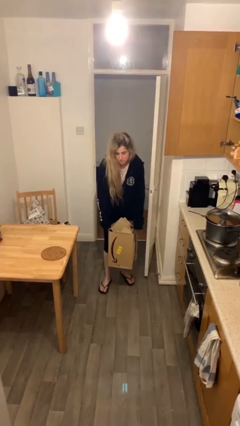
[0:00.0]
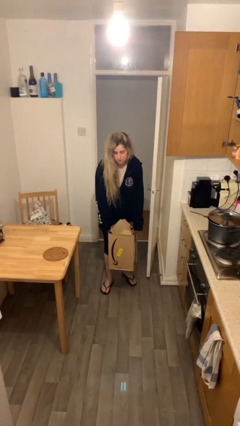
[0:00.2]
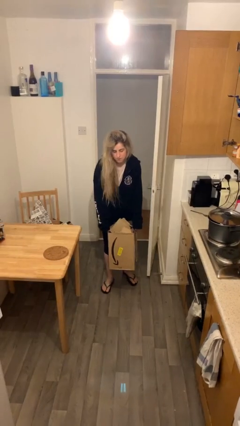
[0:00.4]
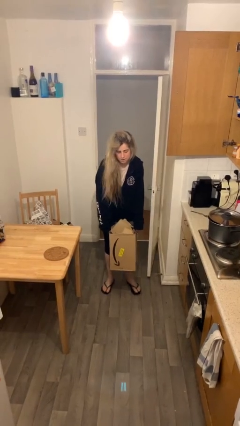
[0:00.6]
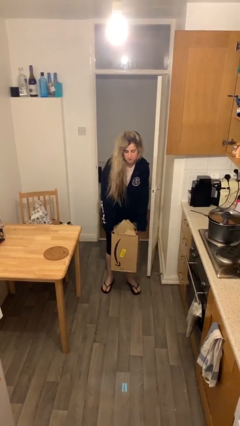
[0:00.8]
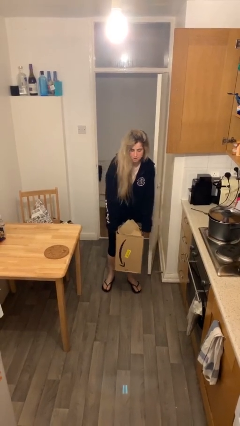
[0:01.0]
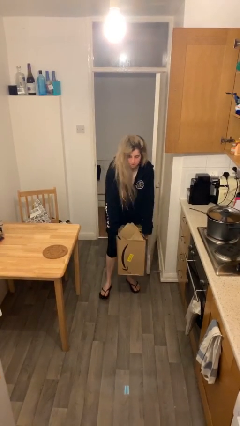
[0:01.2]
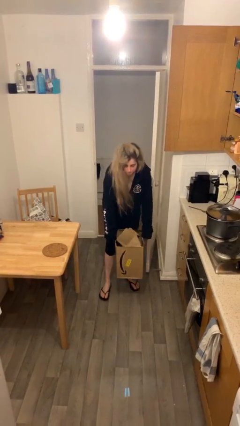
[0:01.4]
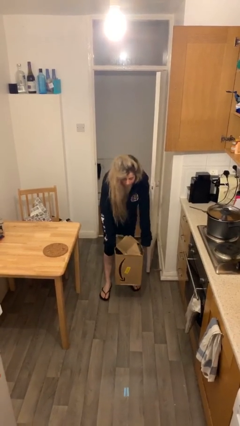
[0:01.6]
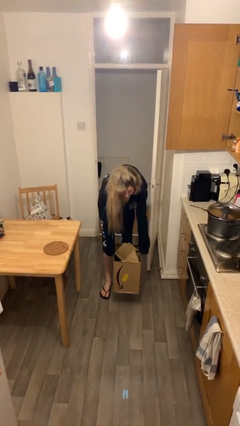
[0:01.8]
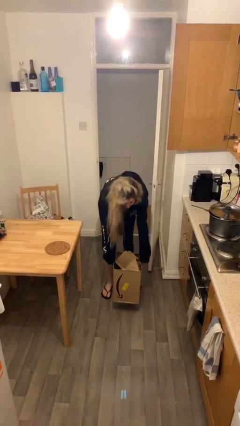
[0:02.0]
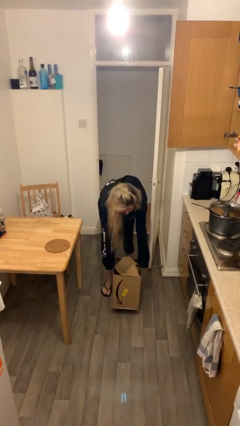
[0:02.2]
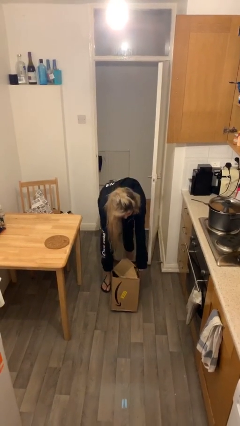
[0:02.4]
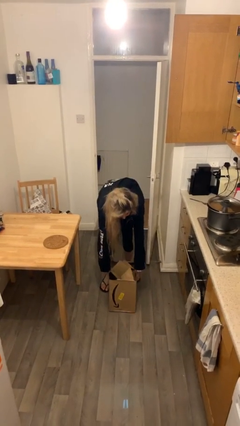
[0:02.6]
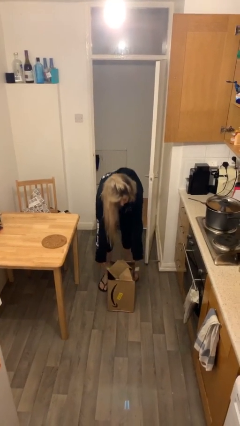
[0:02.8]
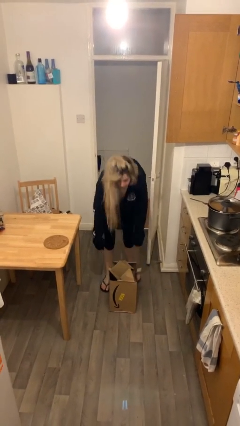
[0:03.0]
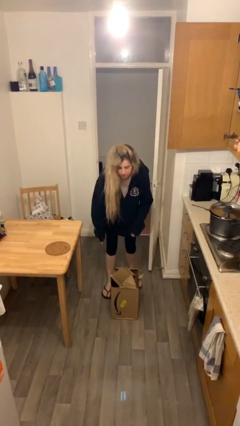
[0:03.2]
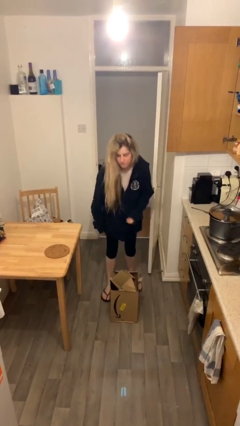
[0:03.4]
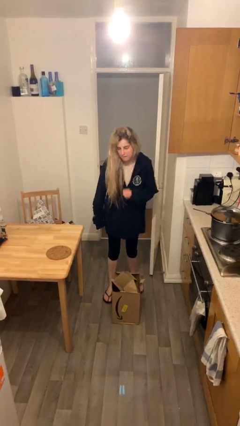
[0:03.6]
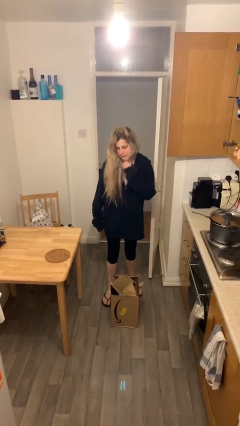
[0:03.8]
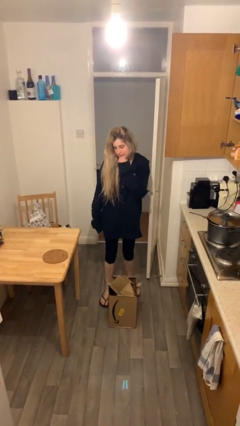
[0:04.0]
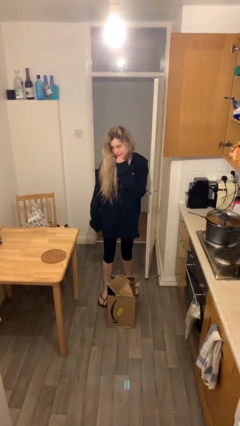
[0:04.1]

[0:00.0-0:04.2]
person puts down object on floor

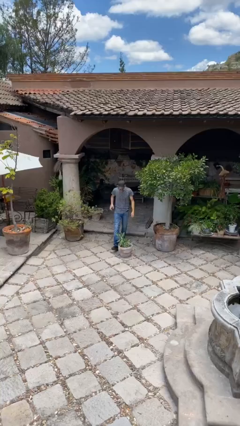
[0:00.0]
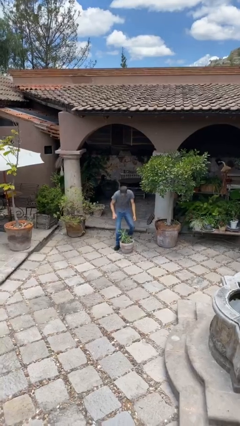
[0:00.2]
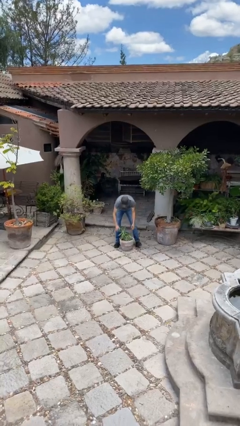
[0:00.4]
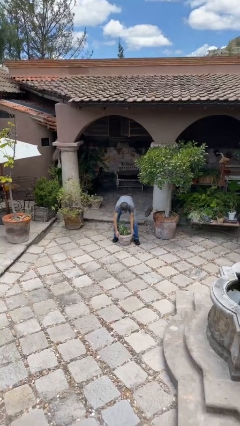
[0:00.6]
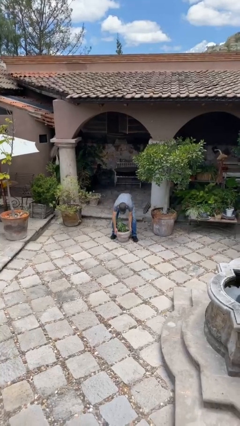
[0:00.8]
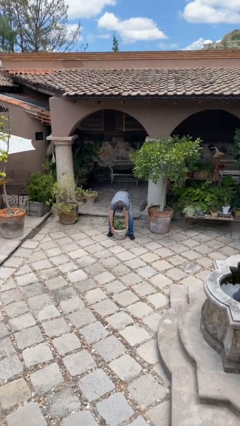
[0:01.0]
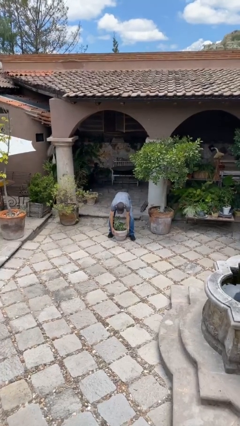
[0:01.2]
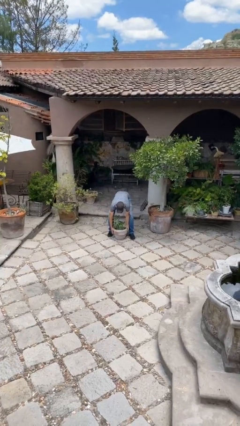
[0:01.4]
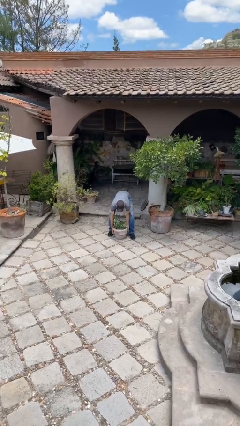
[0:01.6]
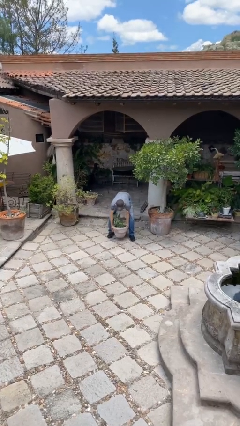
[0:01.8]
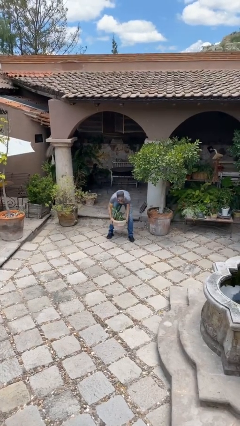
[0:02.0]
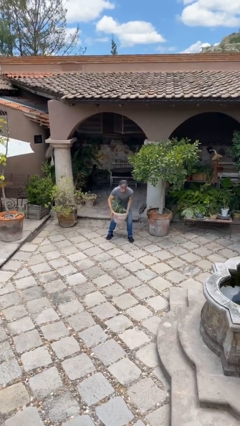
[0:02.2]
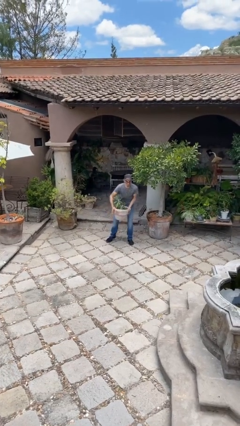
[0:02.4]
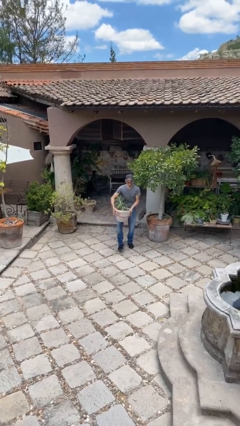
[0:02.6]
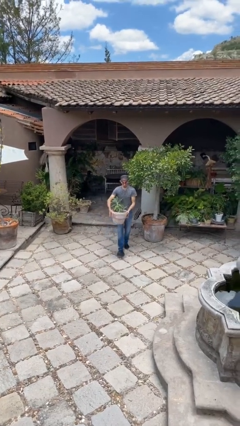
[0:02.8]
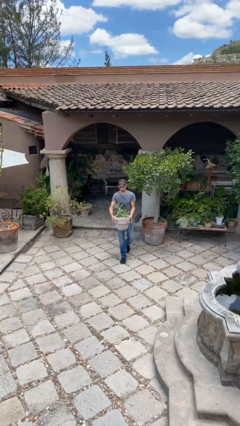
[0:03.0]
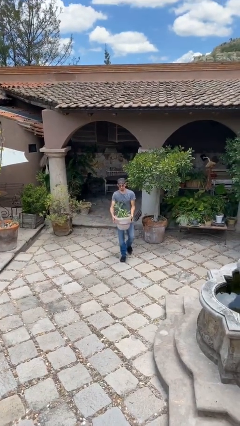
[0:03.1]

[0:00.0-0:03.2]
person picks up object from floor

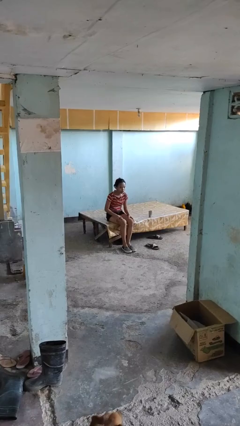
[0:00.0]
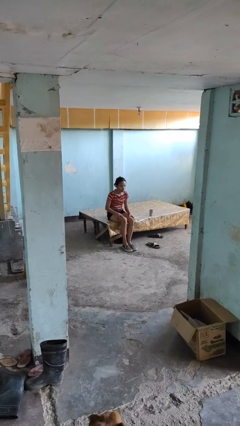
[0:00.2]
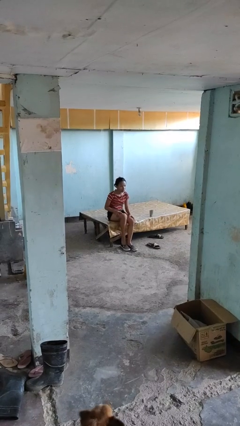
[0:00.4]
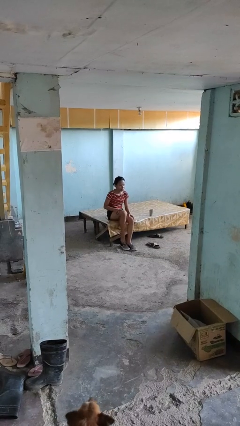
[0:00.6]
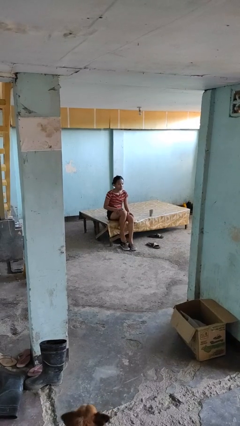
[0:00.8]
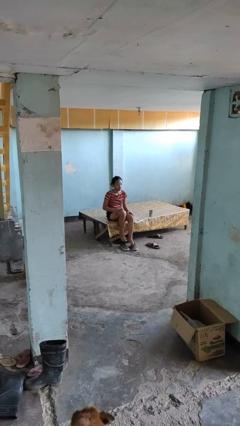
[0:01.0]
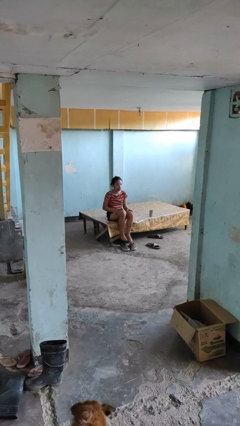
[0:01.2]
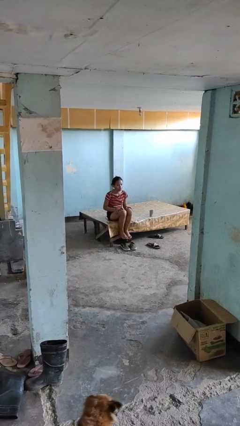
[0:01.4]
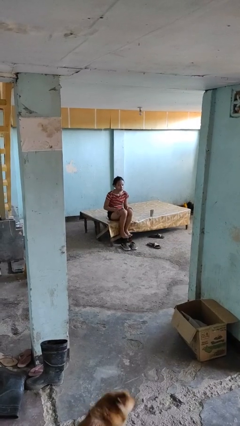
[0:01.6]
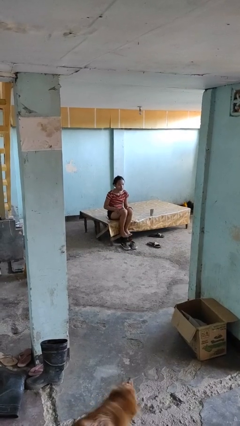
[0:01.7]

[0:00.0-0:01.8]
person takes off shoes

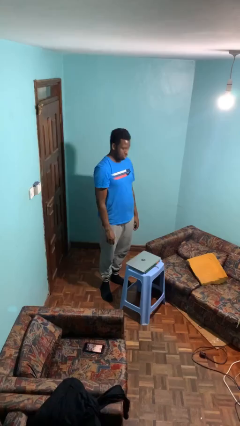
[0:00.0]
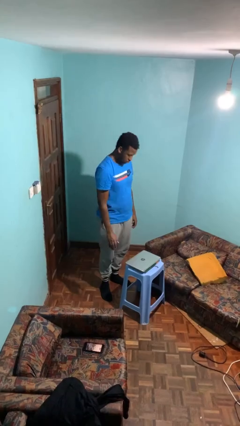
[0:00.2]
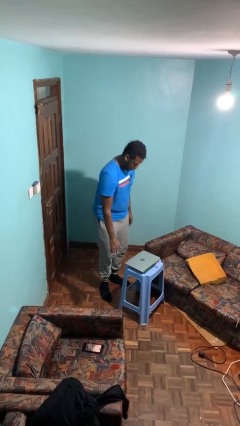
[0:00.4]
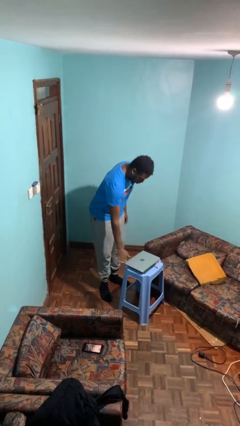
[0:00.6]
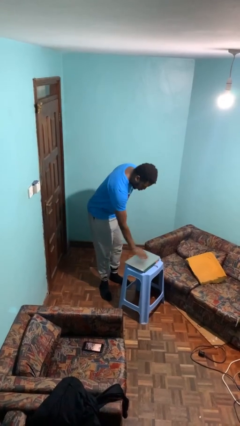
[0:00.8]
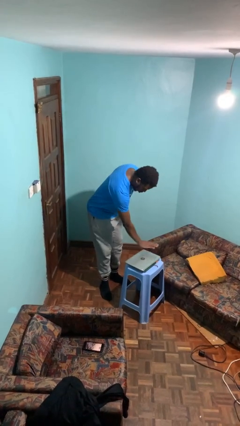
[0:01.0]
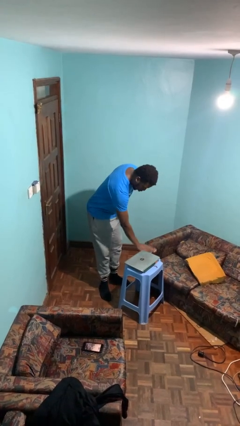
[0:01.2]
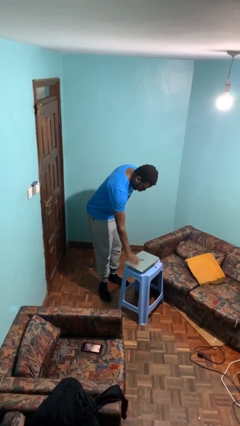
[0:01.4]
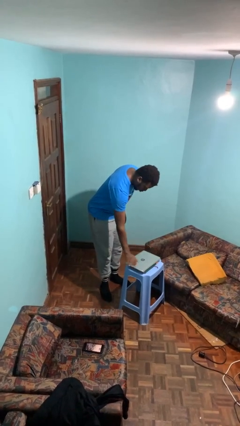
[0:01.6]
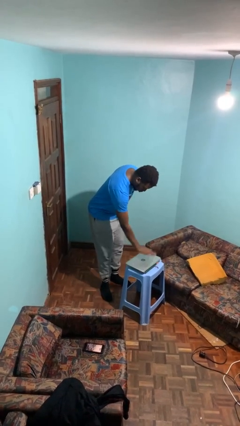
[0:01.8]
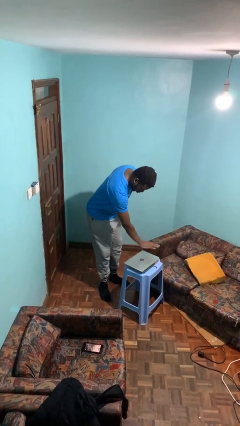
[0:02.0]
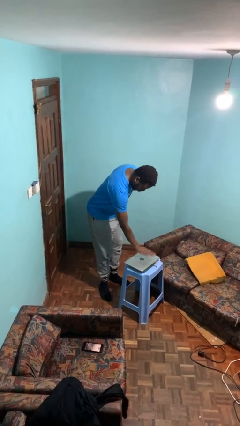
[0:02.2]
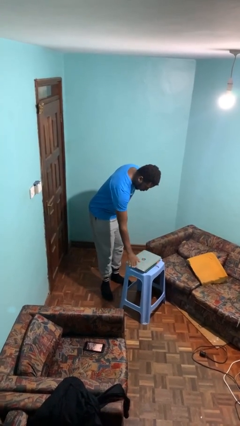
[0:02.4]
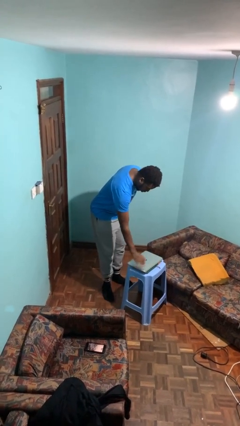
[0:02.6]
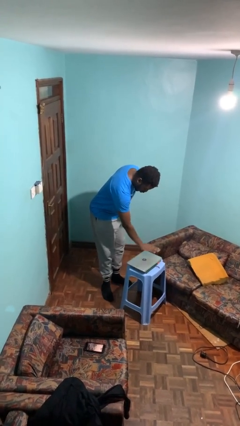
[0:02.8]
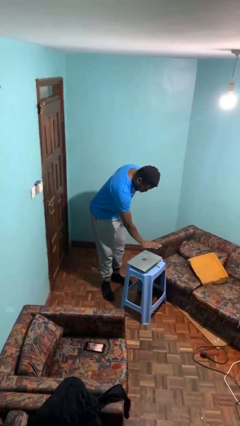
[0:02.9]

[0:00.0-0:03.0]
person waves hand over object

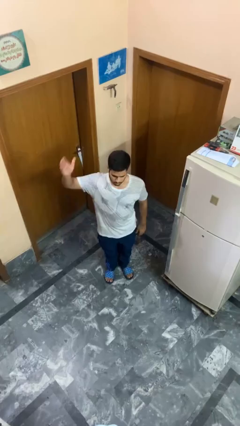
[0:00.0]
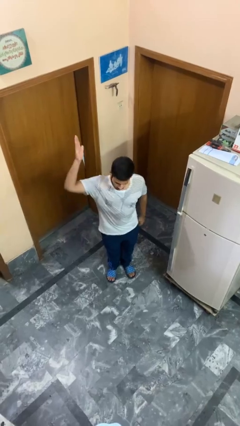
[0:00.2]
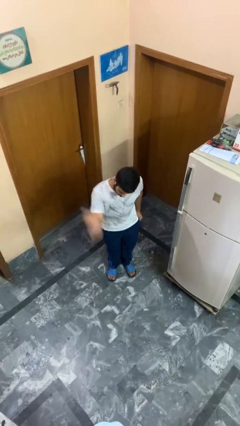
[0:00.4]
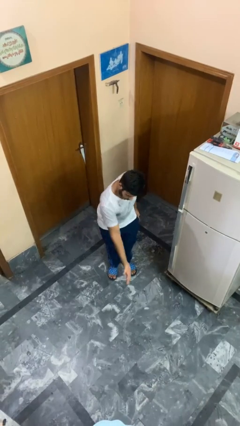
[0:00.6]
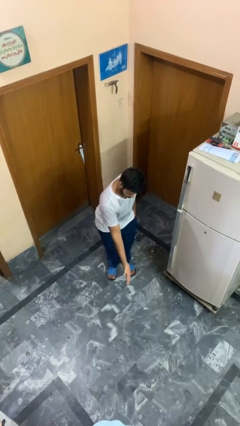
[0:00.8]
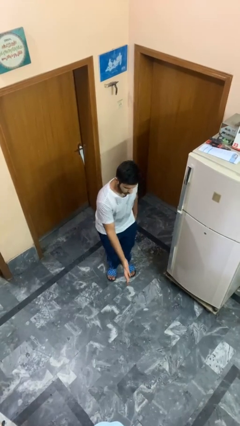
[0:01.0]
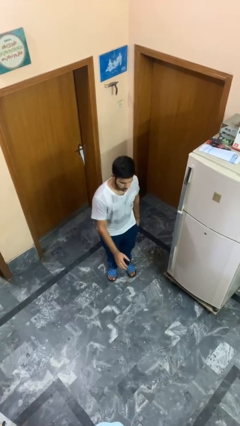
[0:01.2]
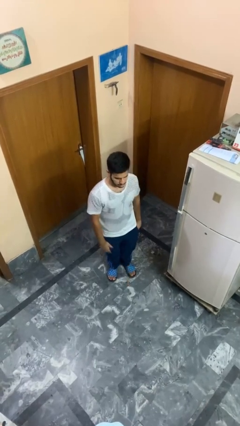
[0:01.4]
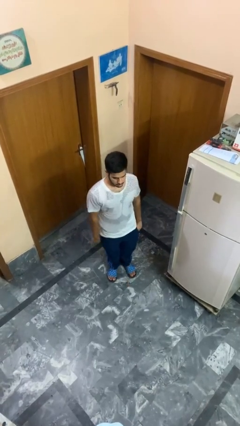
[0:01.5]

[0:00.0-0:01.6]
person karate chop

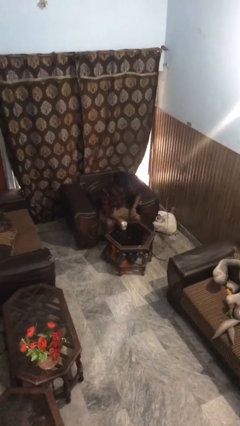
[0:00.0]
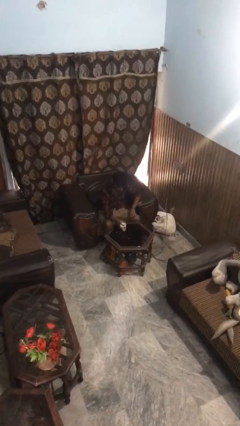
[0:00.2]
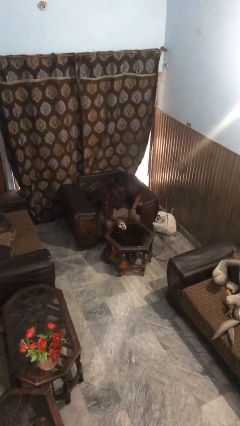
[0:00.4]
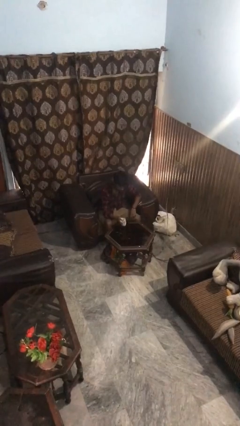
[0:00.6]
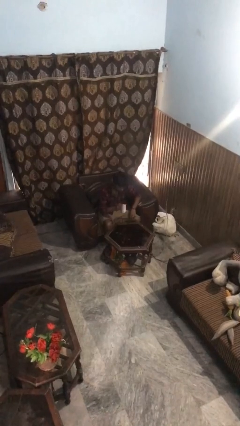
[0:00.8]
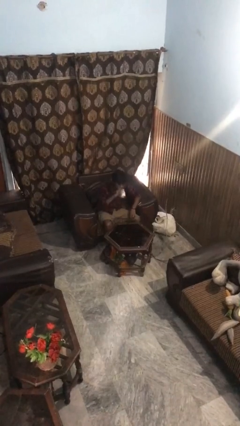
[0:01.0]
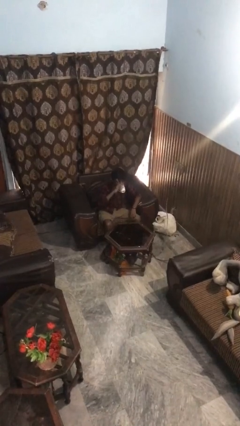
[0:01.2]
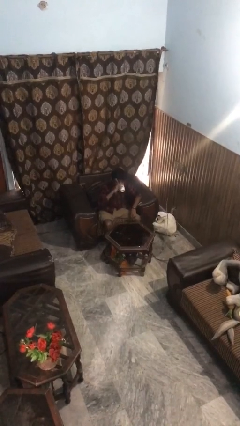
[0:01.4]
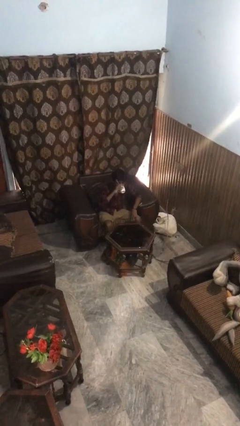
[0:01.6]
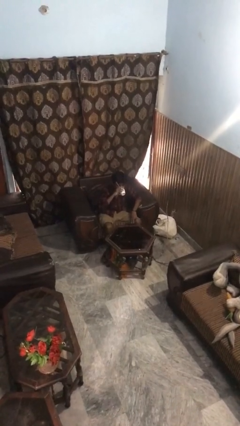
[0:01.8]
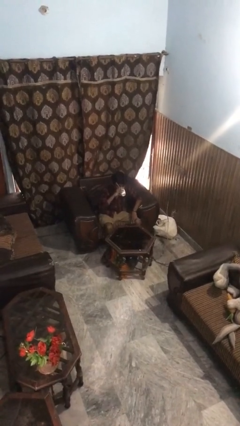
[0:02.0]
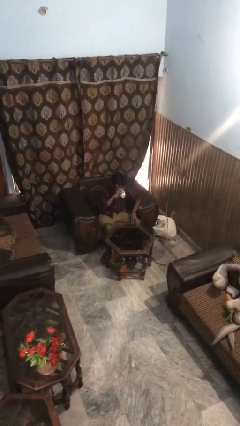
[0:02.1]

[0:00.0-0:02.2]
person drinks from mug

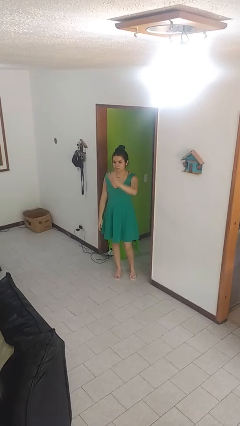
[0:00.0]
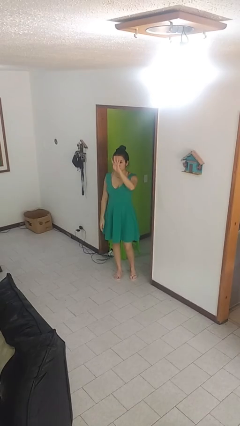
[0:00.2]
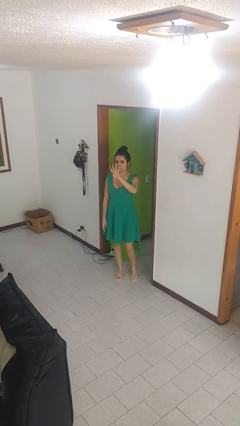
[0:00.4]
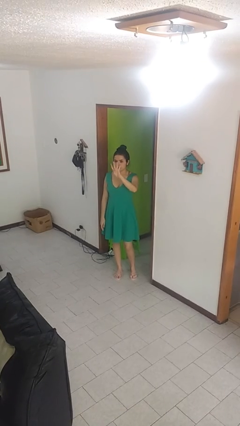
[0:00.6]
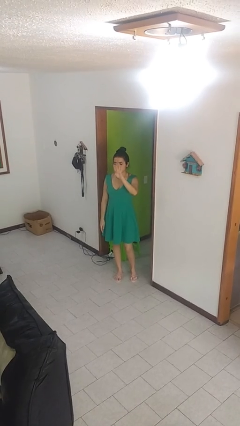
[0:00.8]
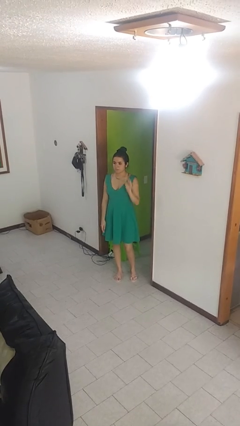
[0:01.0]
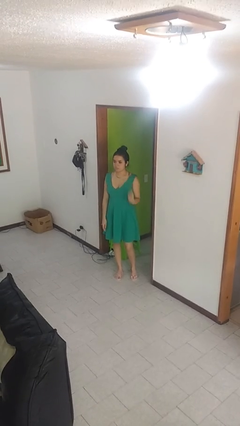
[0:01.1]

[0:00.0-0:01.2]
person gestures number four
